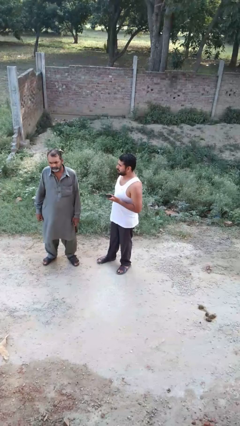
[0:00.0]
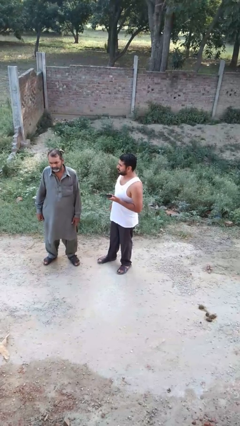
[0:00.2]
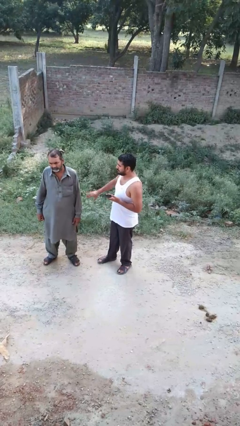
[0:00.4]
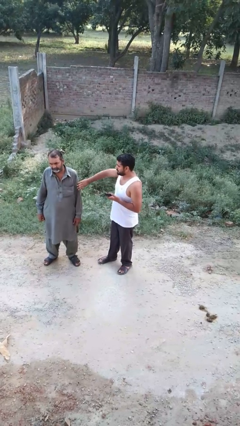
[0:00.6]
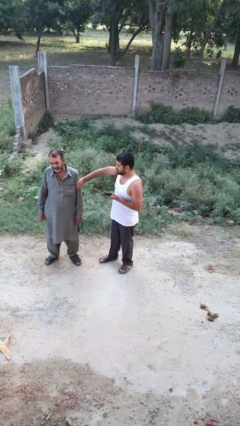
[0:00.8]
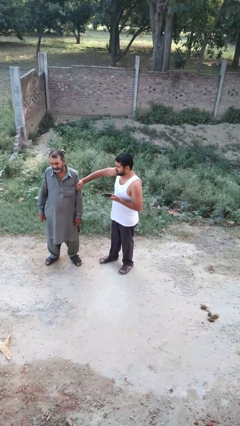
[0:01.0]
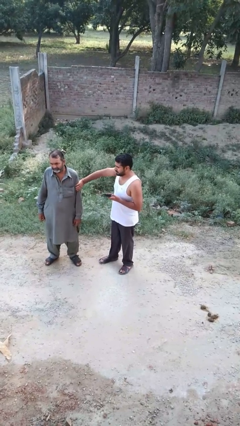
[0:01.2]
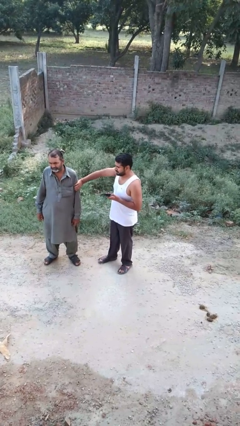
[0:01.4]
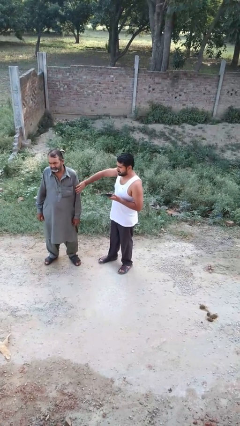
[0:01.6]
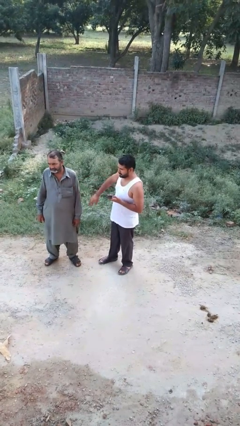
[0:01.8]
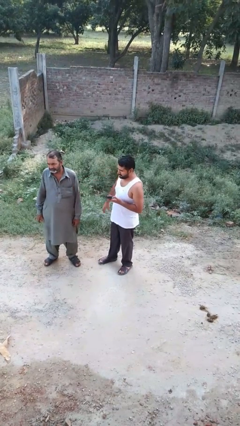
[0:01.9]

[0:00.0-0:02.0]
person grabs person by bicep

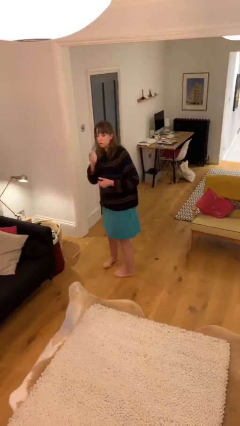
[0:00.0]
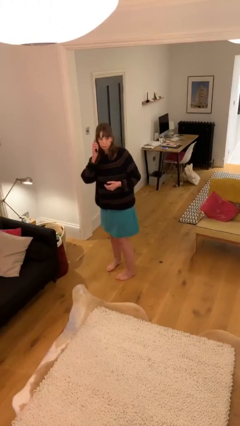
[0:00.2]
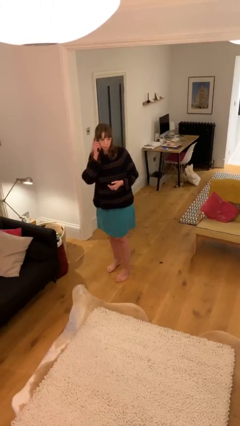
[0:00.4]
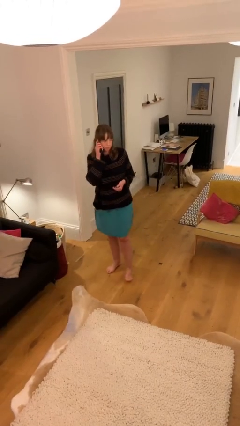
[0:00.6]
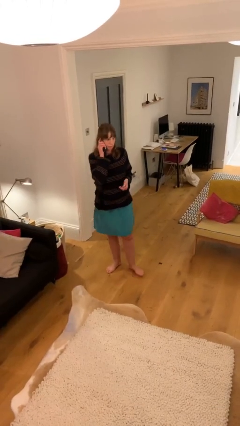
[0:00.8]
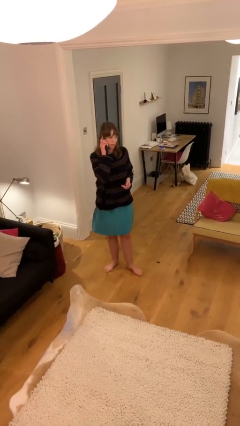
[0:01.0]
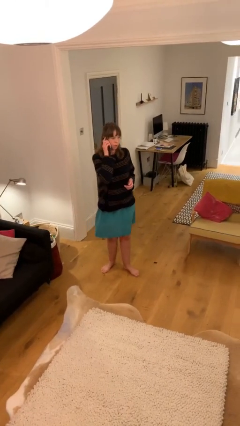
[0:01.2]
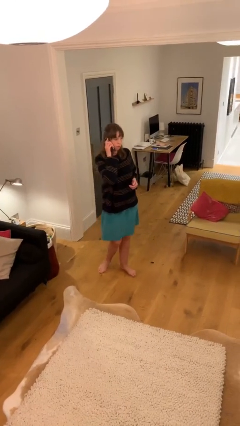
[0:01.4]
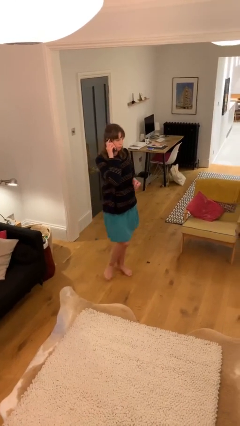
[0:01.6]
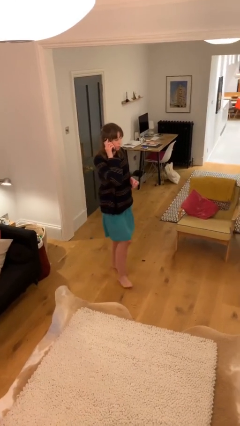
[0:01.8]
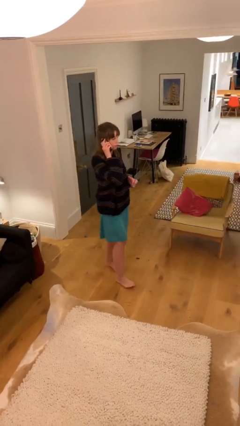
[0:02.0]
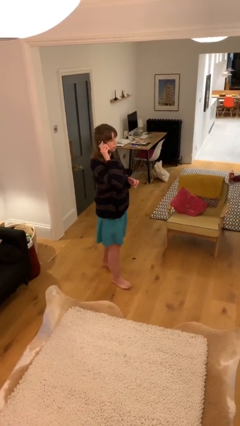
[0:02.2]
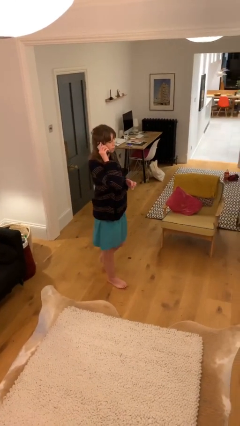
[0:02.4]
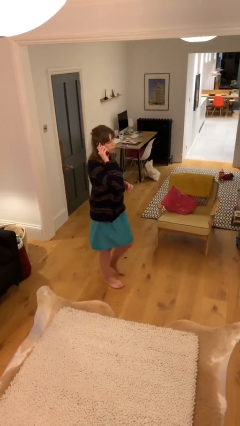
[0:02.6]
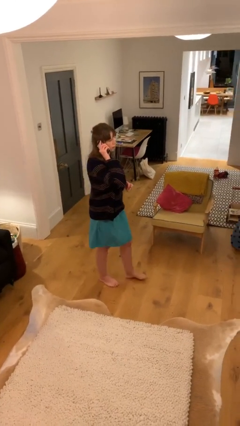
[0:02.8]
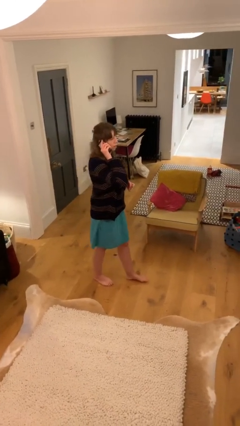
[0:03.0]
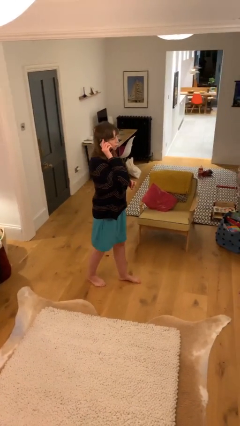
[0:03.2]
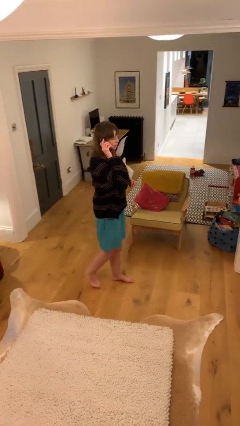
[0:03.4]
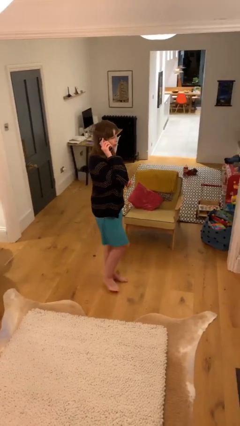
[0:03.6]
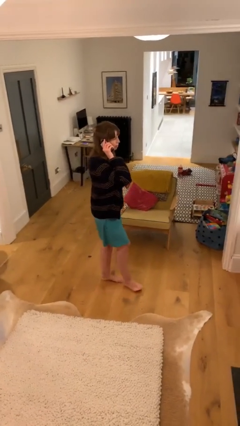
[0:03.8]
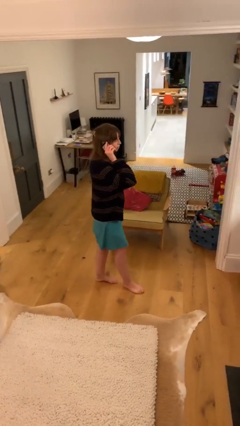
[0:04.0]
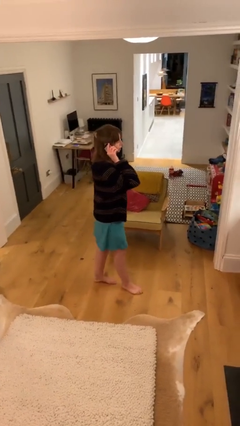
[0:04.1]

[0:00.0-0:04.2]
person talks on phone

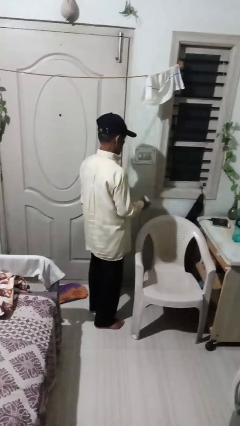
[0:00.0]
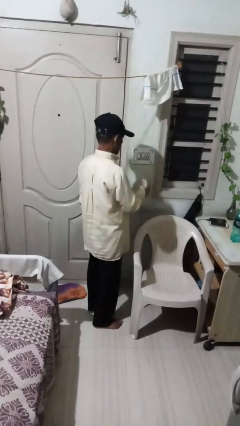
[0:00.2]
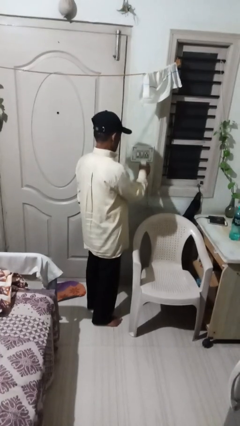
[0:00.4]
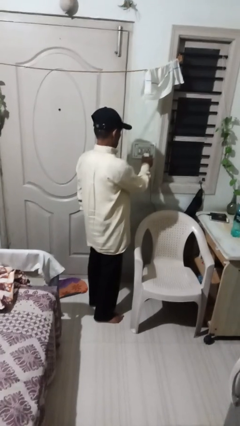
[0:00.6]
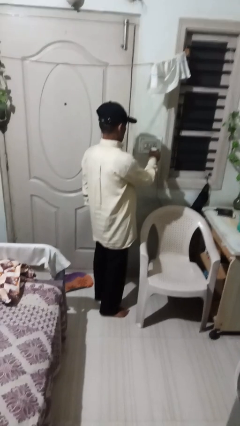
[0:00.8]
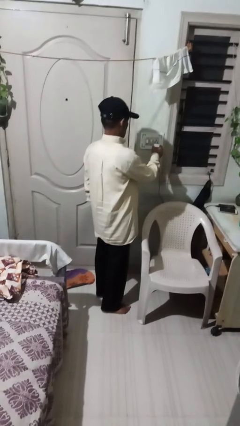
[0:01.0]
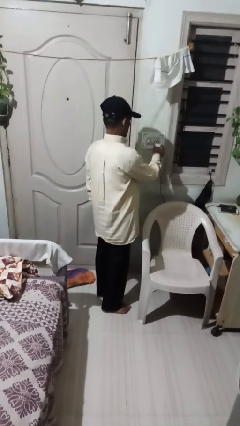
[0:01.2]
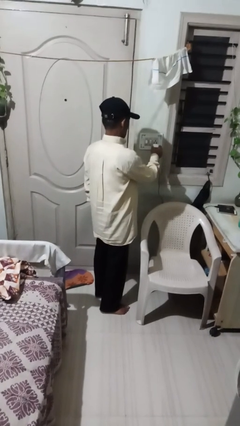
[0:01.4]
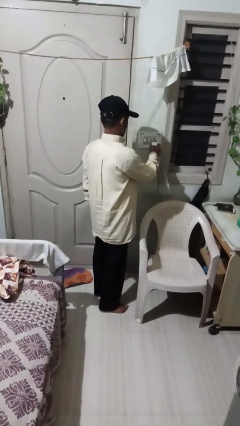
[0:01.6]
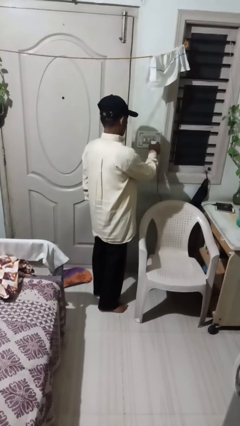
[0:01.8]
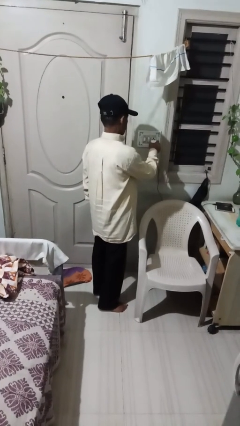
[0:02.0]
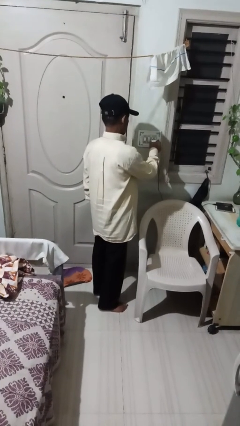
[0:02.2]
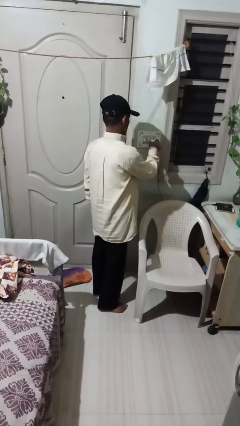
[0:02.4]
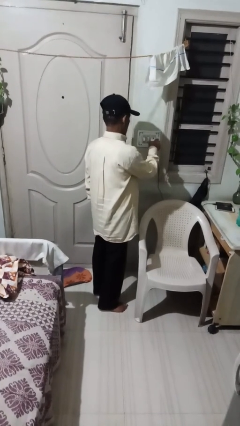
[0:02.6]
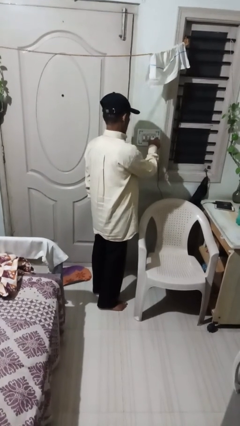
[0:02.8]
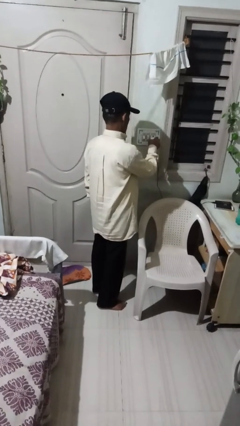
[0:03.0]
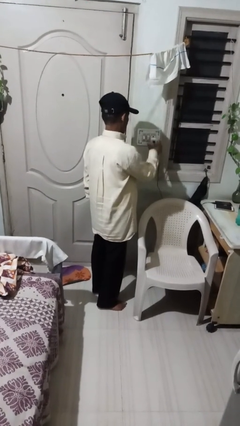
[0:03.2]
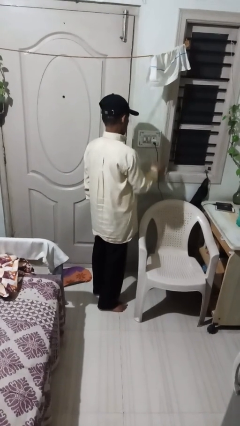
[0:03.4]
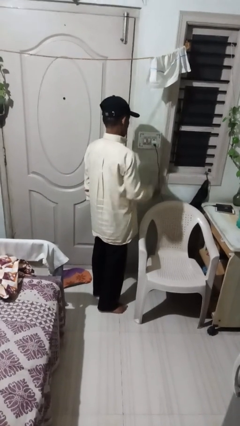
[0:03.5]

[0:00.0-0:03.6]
person plugs into electrical socket

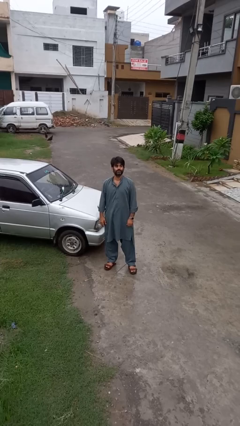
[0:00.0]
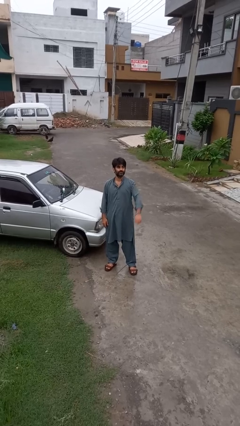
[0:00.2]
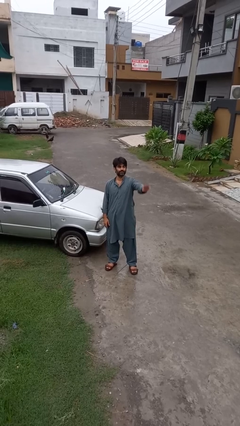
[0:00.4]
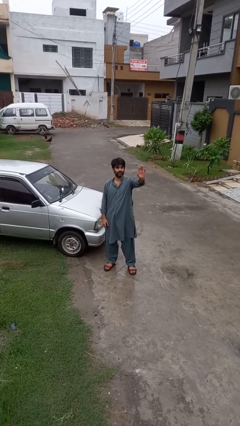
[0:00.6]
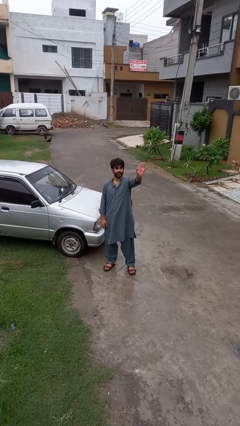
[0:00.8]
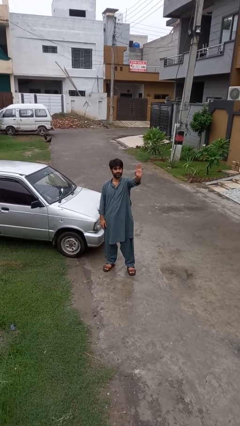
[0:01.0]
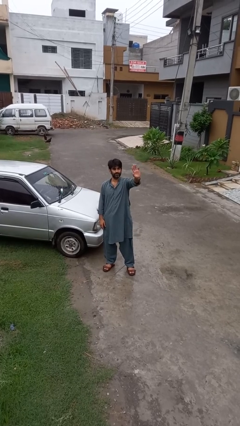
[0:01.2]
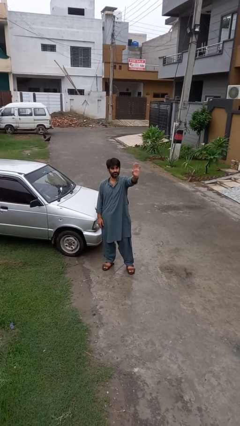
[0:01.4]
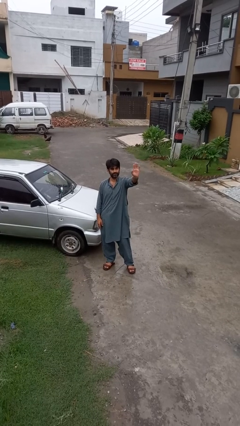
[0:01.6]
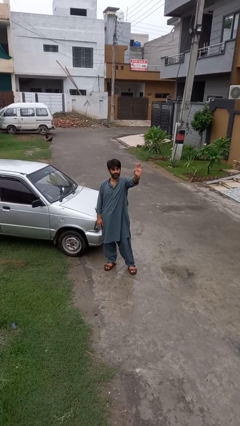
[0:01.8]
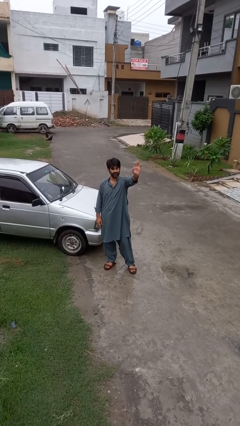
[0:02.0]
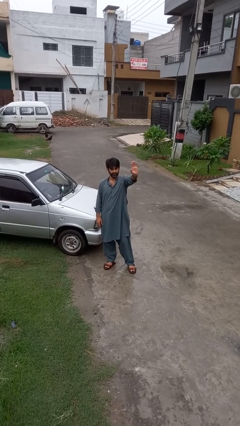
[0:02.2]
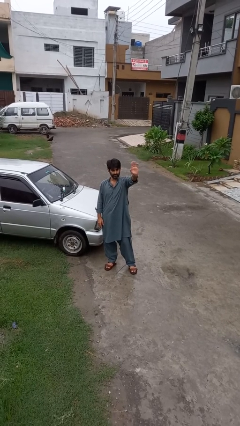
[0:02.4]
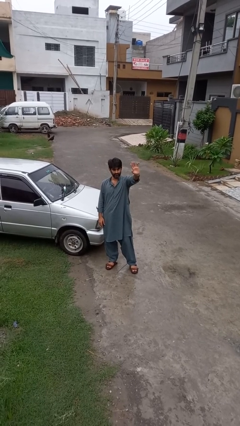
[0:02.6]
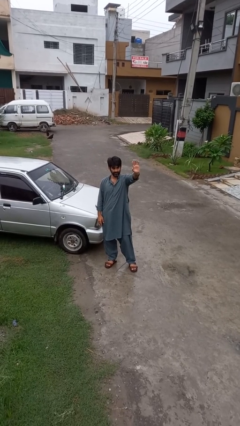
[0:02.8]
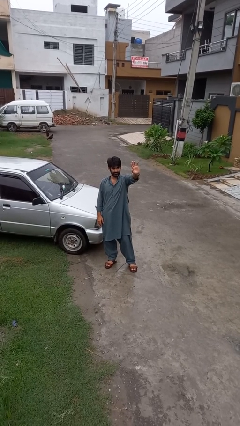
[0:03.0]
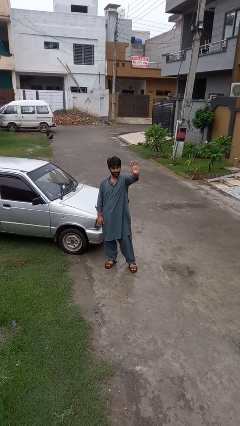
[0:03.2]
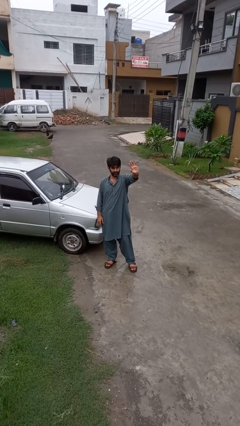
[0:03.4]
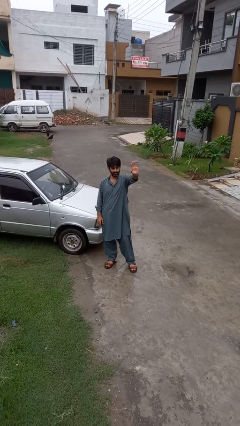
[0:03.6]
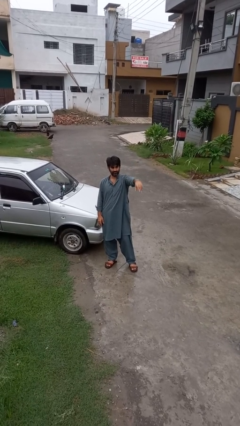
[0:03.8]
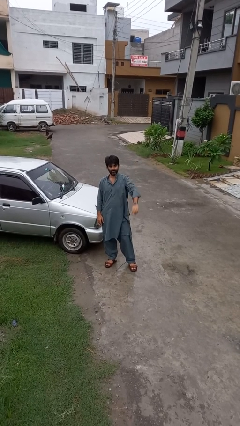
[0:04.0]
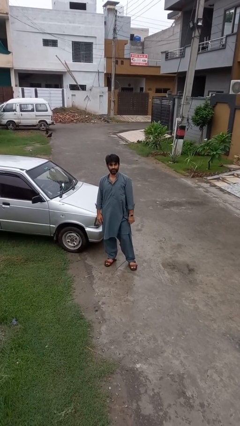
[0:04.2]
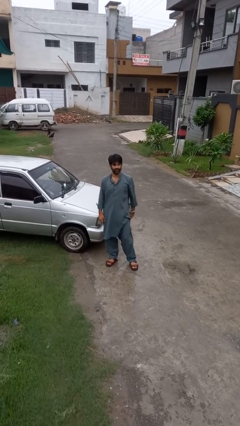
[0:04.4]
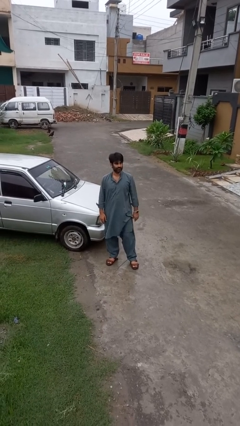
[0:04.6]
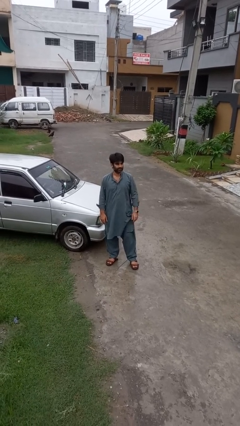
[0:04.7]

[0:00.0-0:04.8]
person waves at person

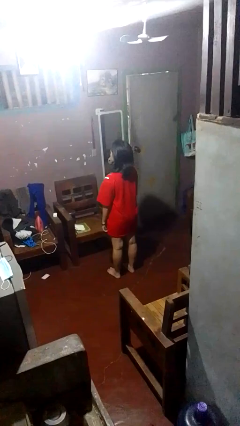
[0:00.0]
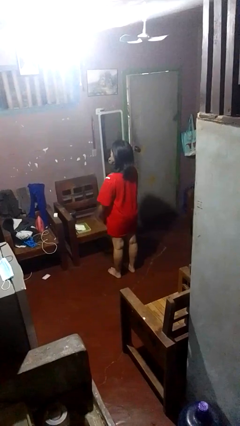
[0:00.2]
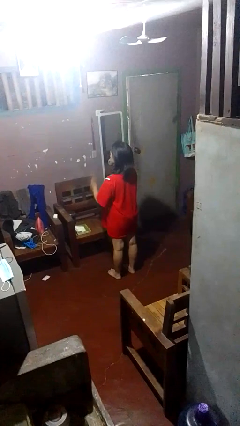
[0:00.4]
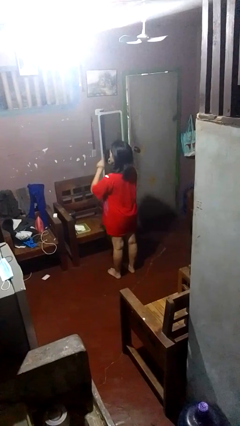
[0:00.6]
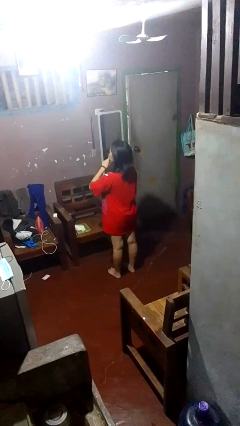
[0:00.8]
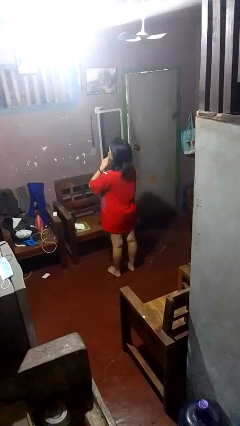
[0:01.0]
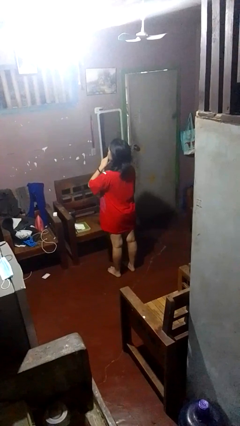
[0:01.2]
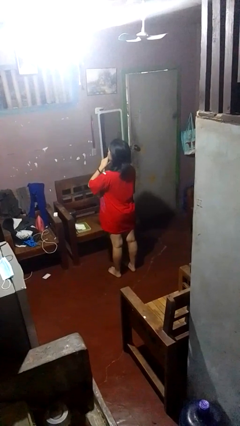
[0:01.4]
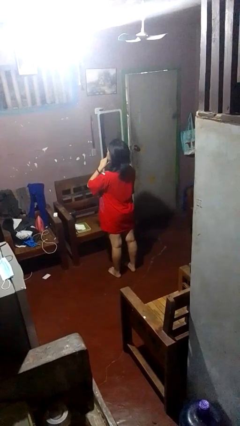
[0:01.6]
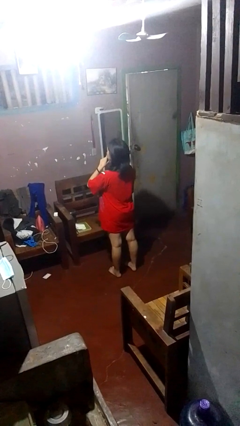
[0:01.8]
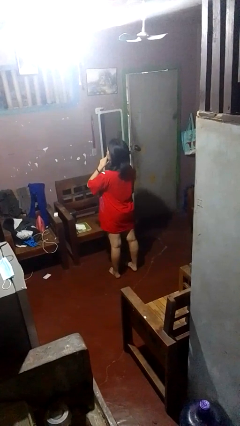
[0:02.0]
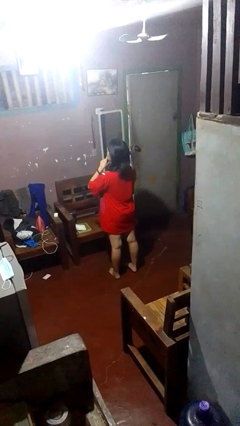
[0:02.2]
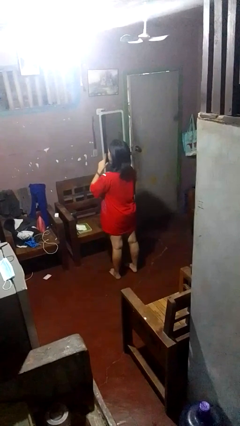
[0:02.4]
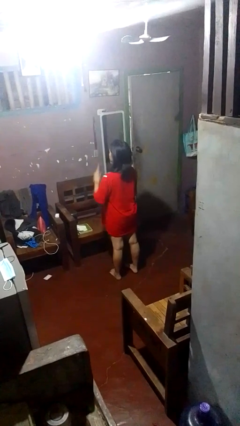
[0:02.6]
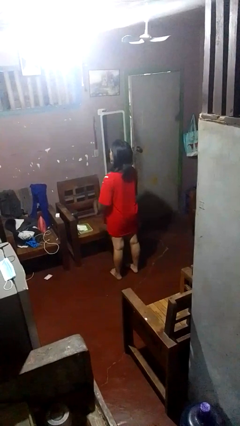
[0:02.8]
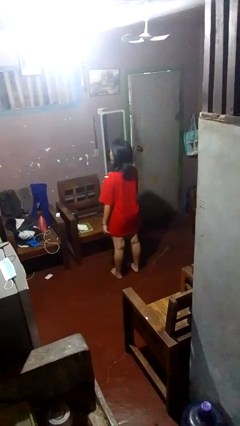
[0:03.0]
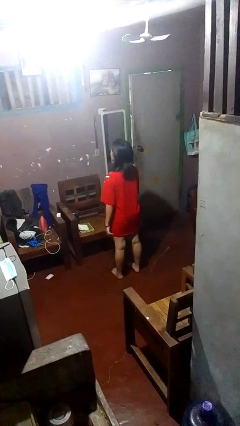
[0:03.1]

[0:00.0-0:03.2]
person gestures be quiet
